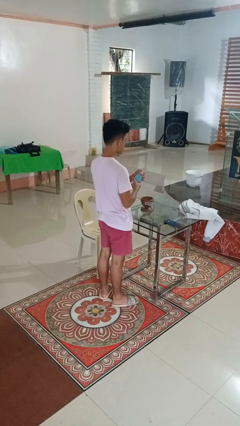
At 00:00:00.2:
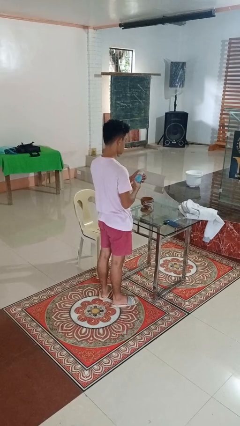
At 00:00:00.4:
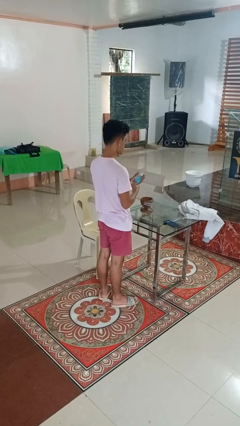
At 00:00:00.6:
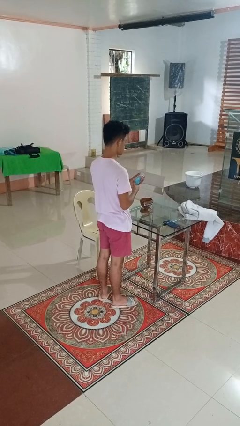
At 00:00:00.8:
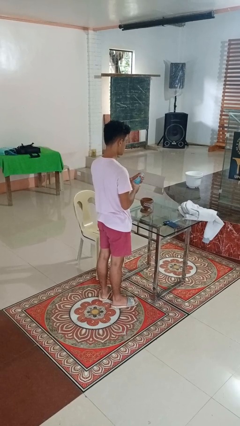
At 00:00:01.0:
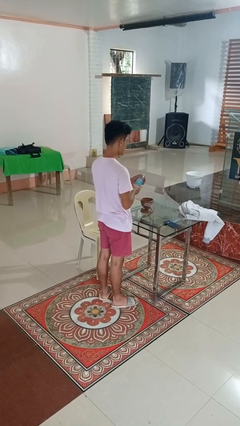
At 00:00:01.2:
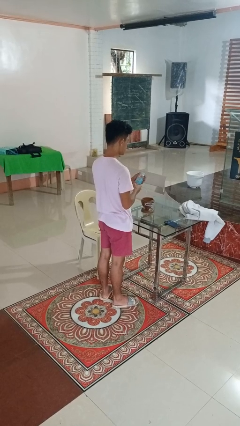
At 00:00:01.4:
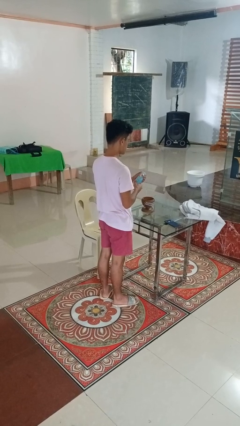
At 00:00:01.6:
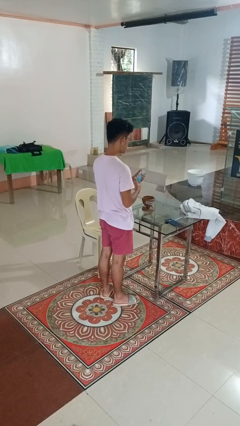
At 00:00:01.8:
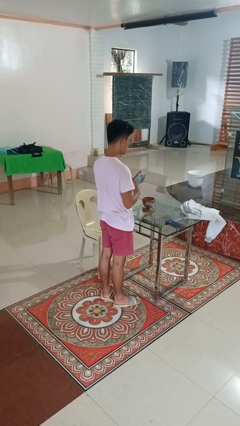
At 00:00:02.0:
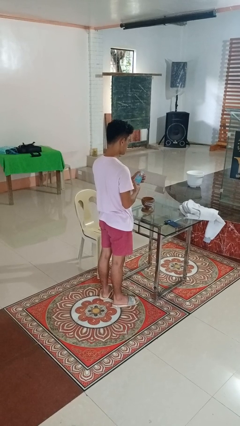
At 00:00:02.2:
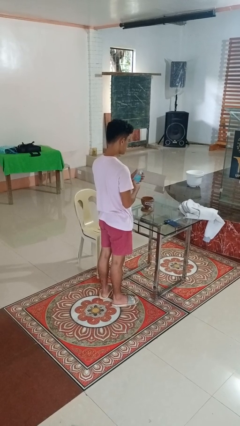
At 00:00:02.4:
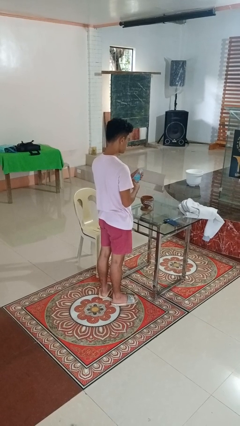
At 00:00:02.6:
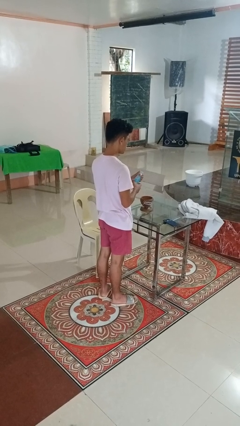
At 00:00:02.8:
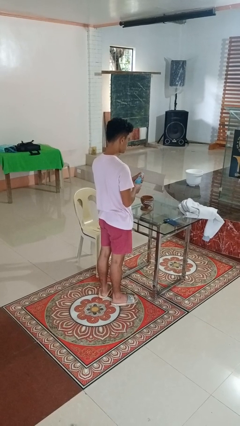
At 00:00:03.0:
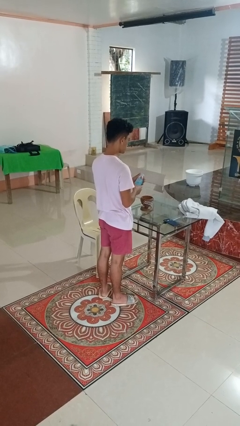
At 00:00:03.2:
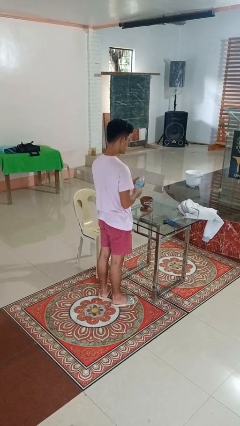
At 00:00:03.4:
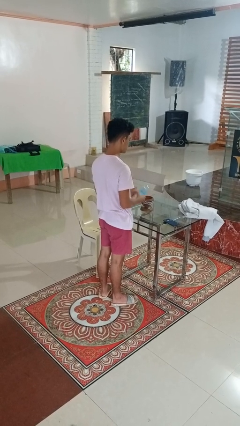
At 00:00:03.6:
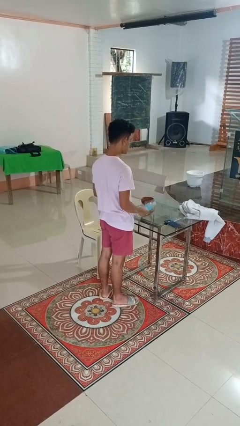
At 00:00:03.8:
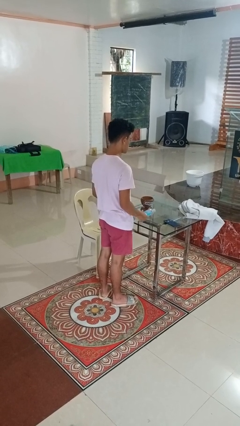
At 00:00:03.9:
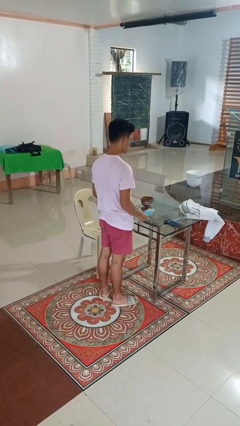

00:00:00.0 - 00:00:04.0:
person squeezes object

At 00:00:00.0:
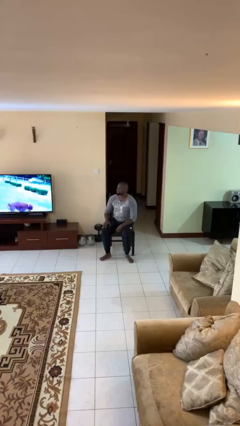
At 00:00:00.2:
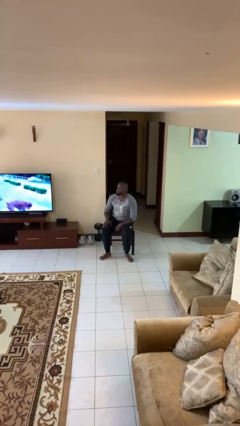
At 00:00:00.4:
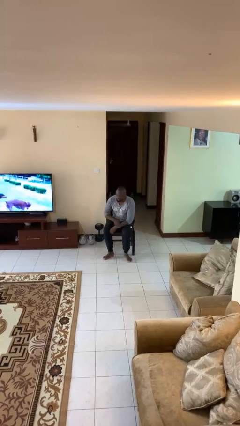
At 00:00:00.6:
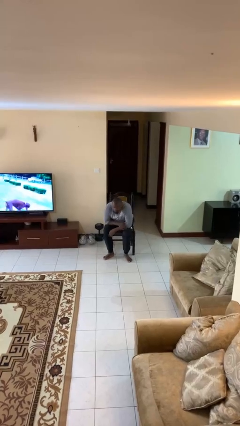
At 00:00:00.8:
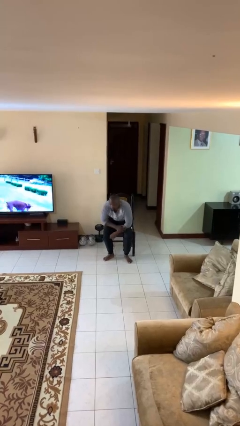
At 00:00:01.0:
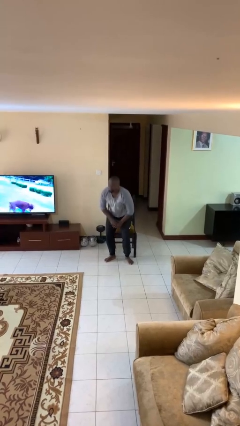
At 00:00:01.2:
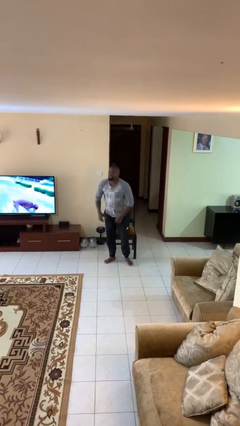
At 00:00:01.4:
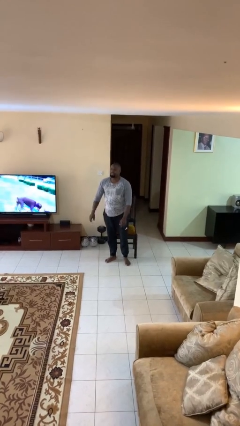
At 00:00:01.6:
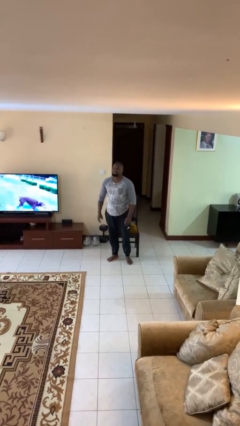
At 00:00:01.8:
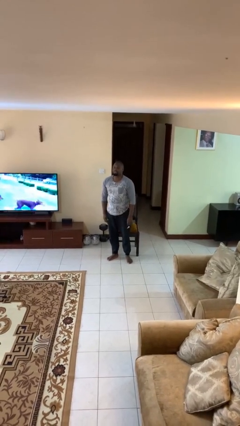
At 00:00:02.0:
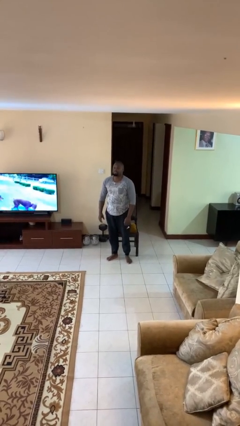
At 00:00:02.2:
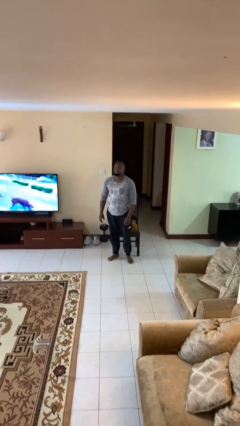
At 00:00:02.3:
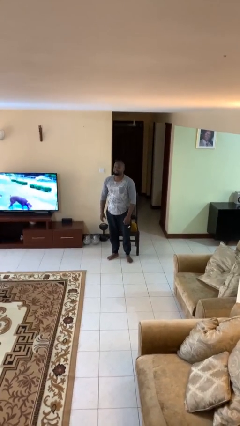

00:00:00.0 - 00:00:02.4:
person stands up

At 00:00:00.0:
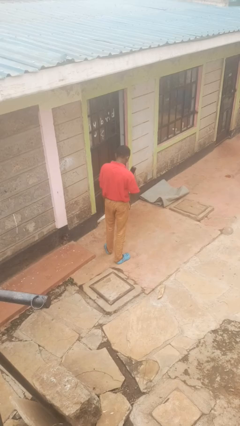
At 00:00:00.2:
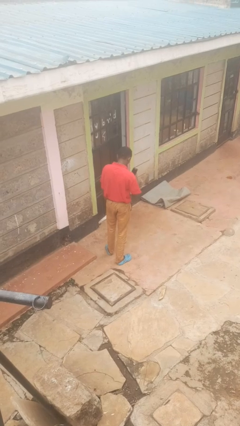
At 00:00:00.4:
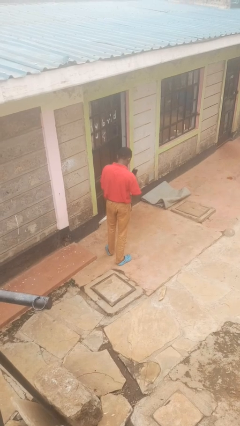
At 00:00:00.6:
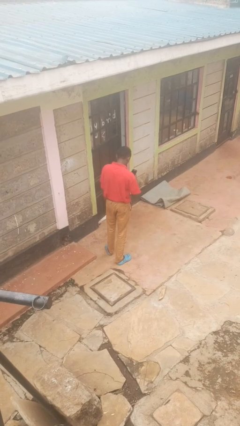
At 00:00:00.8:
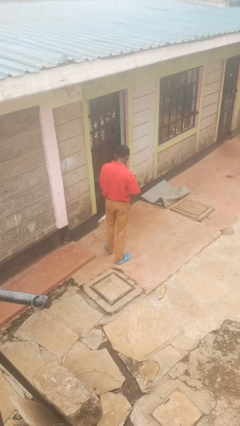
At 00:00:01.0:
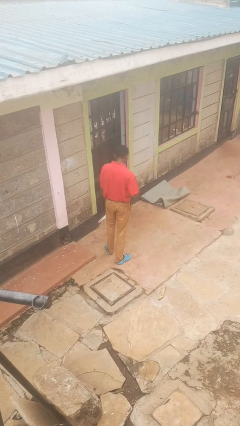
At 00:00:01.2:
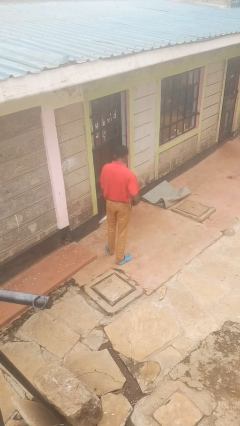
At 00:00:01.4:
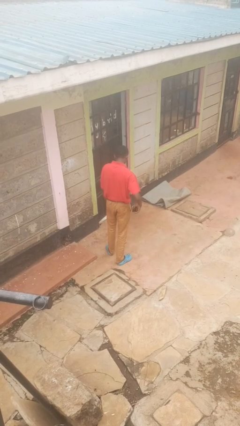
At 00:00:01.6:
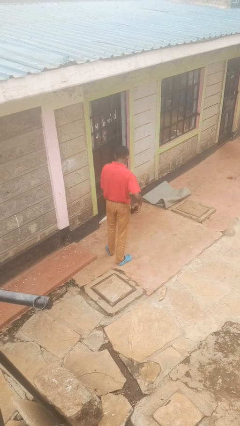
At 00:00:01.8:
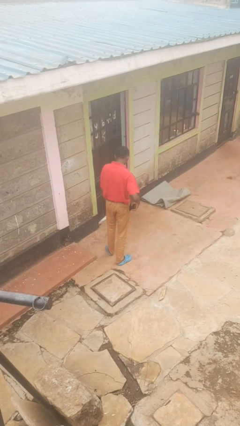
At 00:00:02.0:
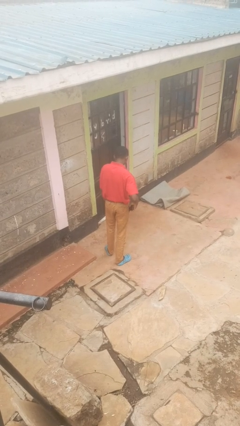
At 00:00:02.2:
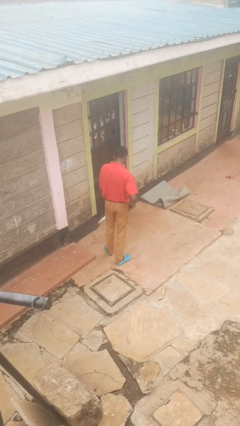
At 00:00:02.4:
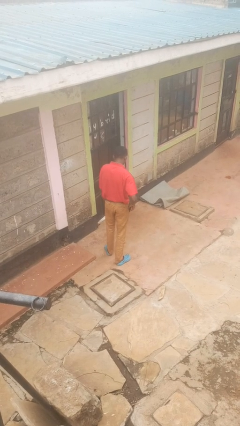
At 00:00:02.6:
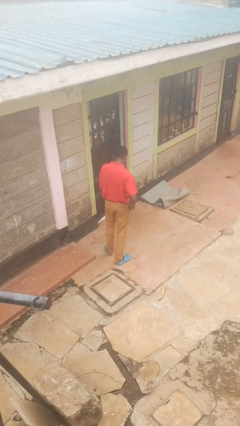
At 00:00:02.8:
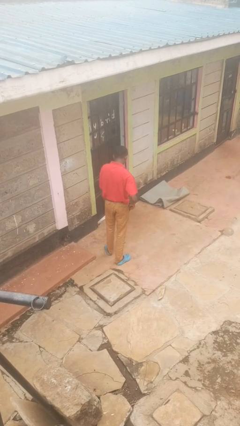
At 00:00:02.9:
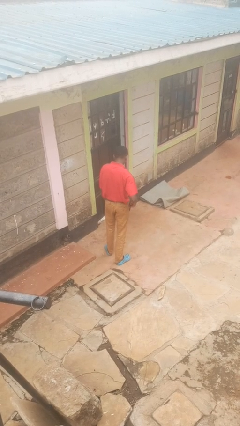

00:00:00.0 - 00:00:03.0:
person puts phone into pocket

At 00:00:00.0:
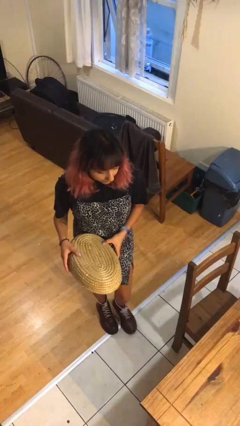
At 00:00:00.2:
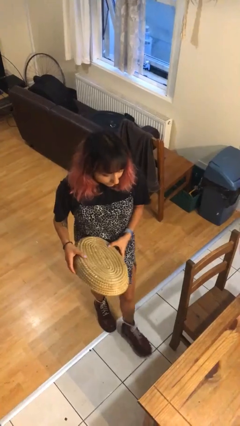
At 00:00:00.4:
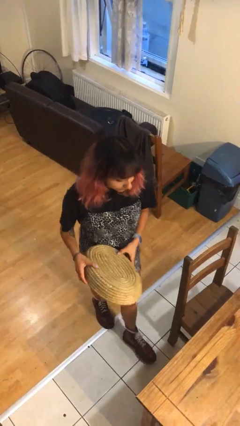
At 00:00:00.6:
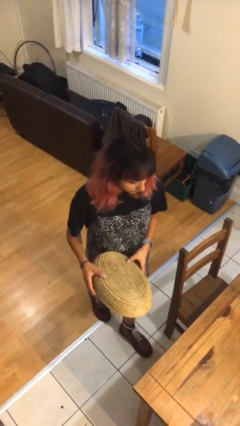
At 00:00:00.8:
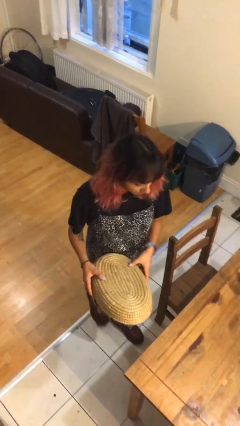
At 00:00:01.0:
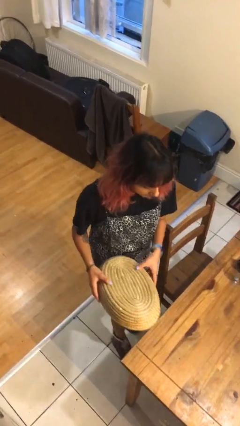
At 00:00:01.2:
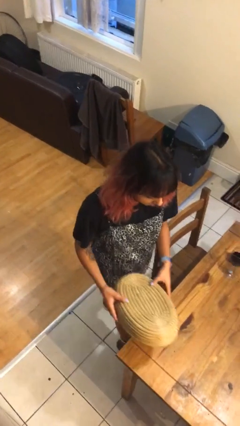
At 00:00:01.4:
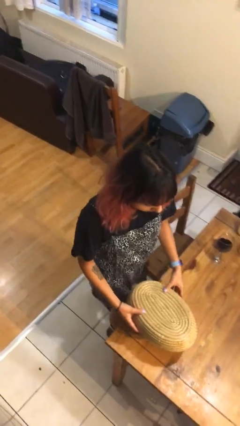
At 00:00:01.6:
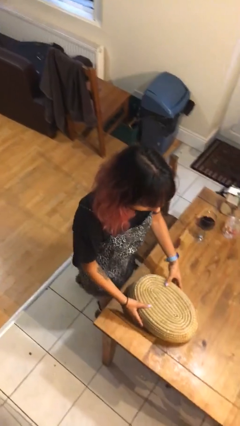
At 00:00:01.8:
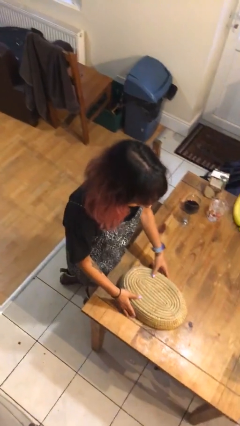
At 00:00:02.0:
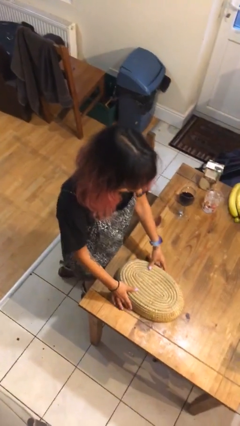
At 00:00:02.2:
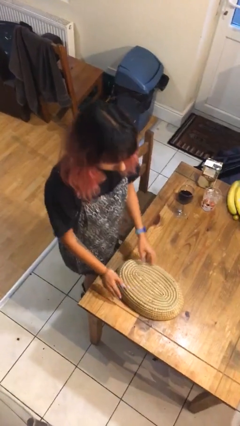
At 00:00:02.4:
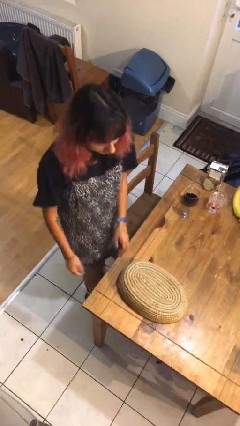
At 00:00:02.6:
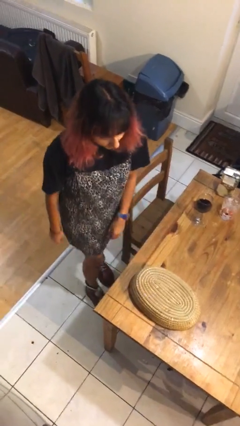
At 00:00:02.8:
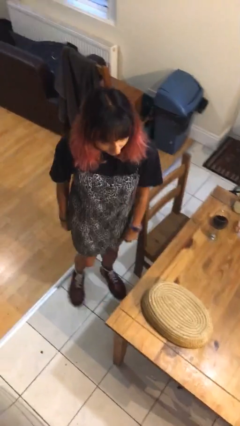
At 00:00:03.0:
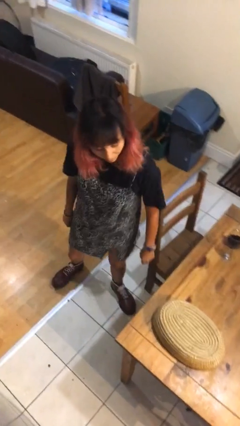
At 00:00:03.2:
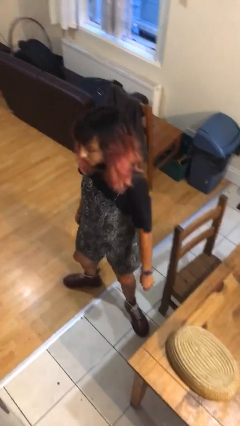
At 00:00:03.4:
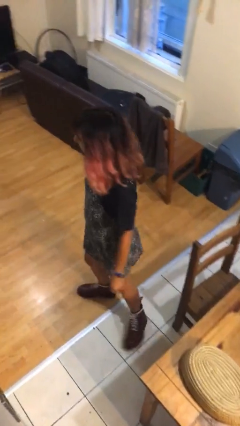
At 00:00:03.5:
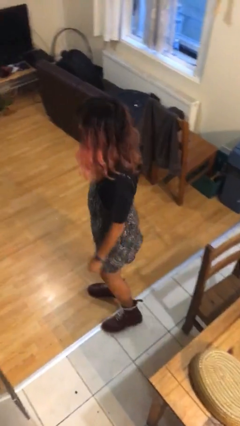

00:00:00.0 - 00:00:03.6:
person puts down object on table

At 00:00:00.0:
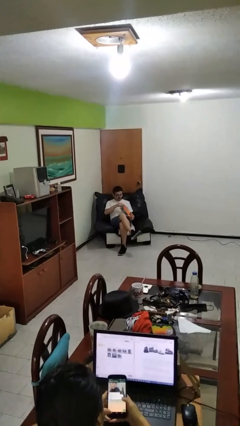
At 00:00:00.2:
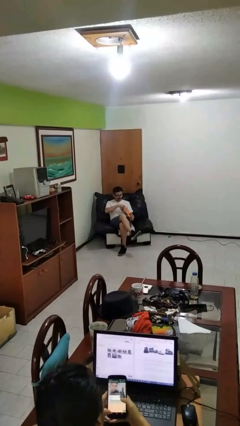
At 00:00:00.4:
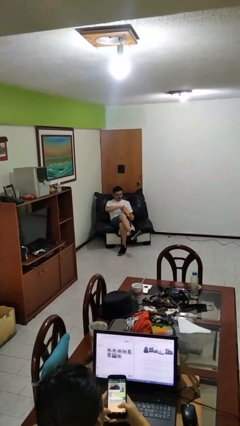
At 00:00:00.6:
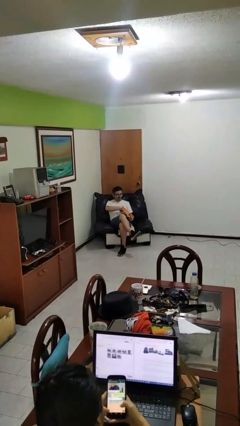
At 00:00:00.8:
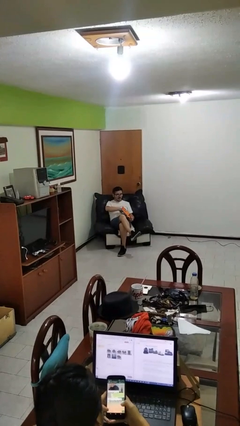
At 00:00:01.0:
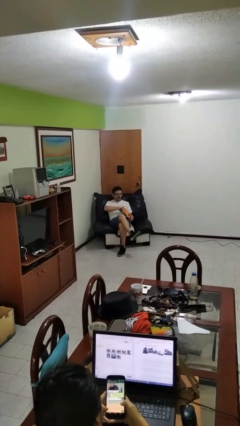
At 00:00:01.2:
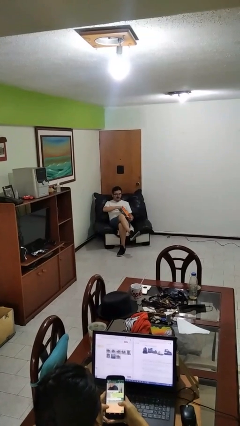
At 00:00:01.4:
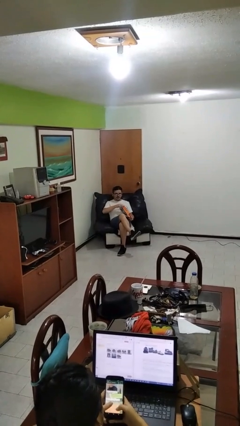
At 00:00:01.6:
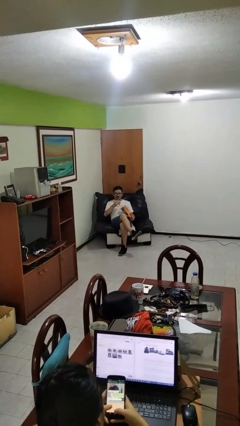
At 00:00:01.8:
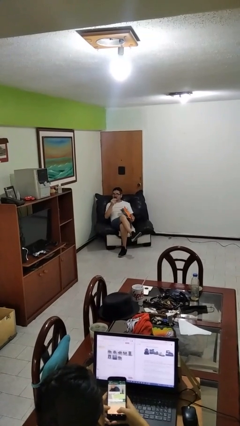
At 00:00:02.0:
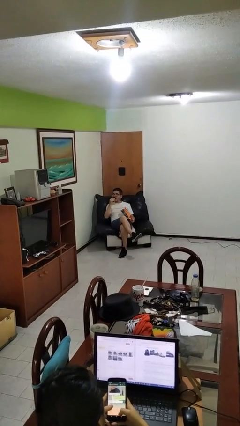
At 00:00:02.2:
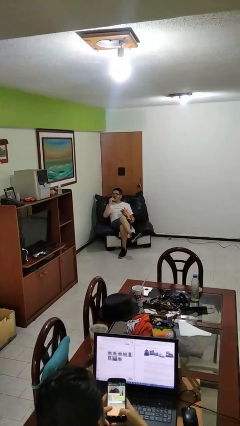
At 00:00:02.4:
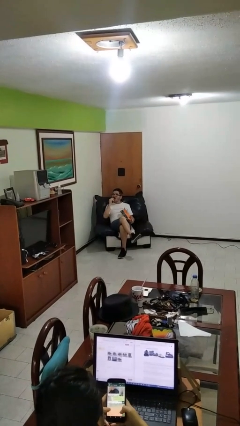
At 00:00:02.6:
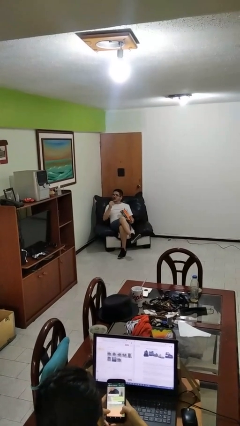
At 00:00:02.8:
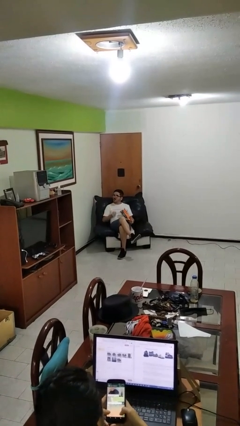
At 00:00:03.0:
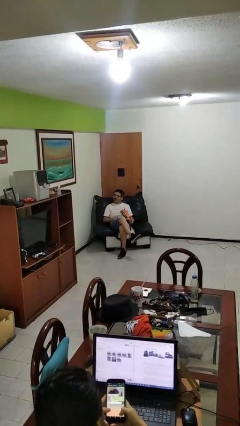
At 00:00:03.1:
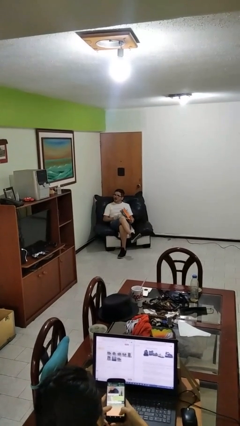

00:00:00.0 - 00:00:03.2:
person eats snack from bag

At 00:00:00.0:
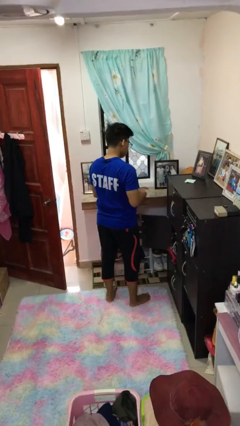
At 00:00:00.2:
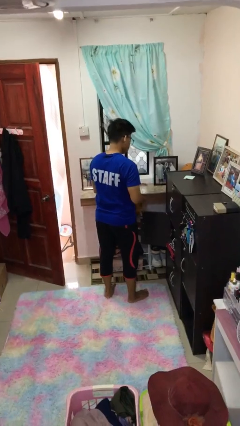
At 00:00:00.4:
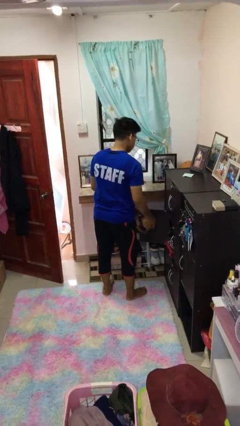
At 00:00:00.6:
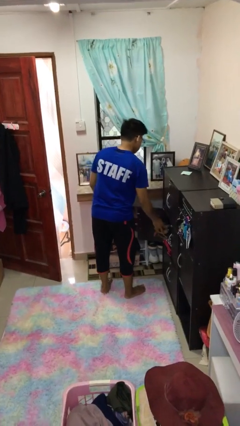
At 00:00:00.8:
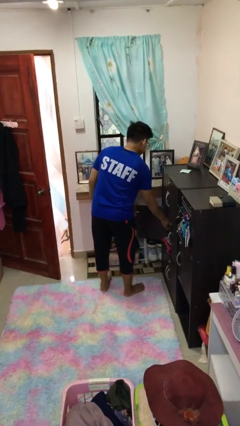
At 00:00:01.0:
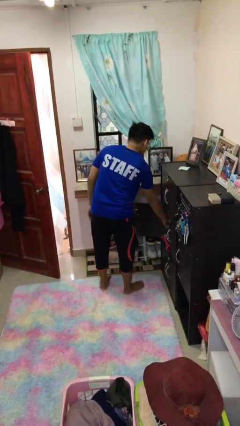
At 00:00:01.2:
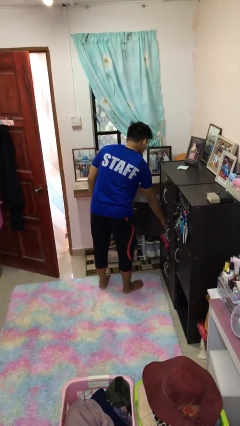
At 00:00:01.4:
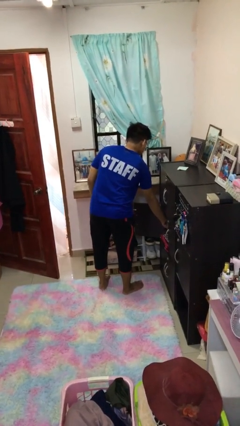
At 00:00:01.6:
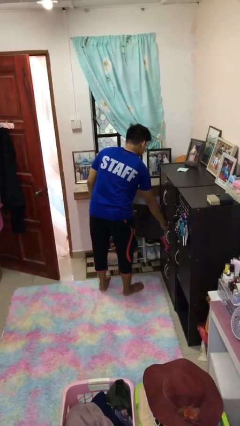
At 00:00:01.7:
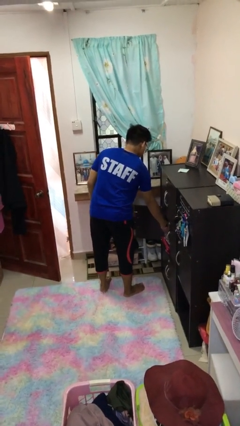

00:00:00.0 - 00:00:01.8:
person puts down object into cabinet
